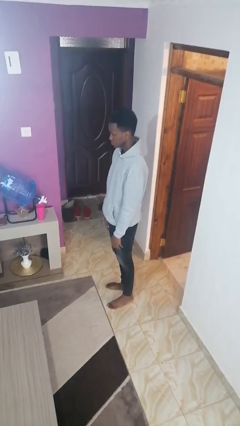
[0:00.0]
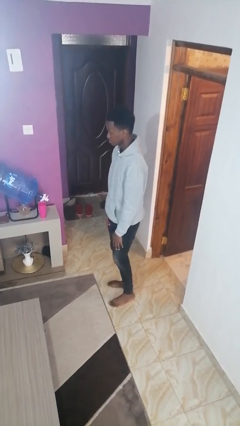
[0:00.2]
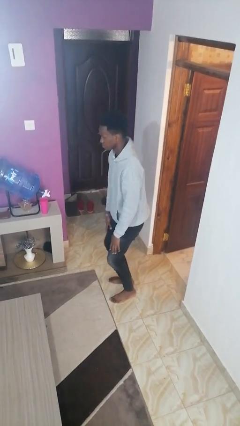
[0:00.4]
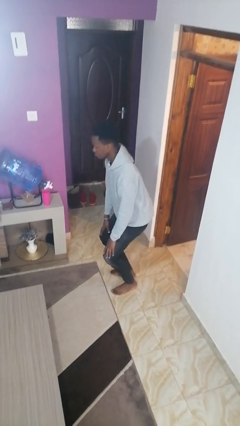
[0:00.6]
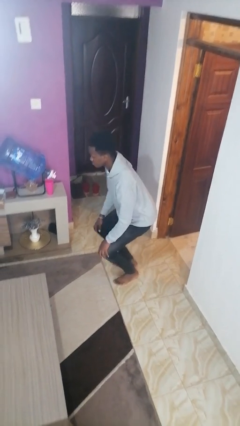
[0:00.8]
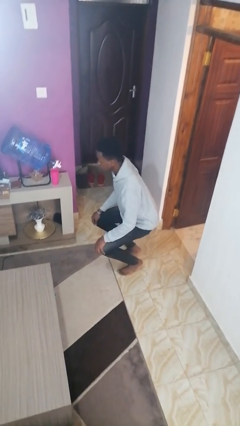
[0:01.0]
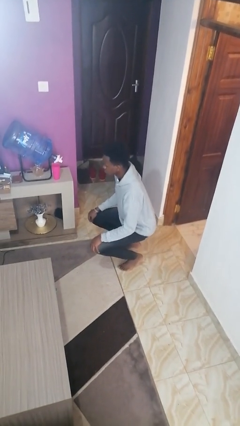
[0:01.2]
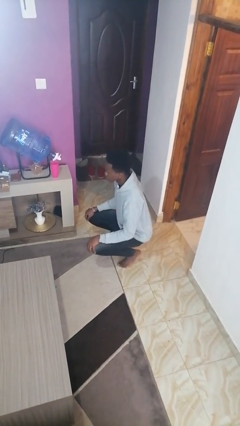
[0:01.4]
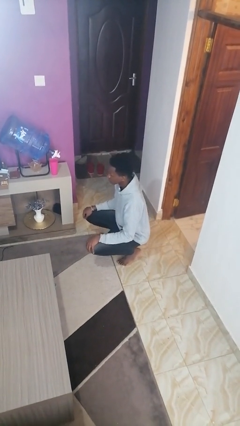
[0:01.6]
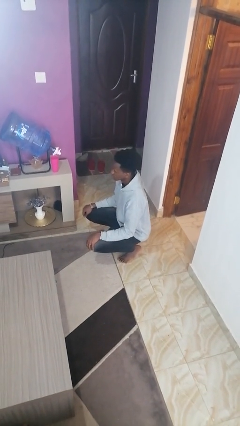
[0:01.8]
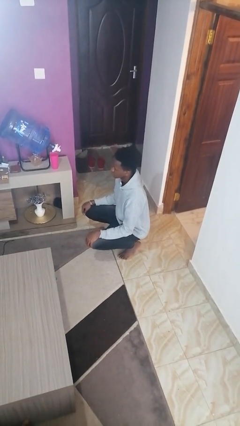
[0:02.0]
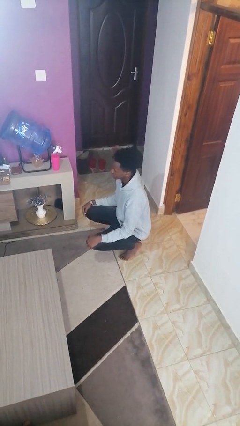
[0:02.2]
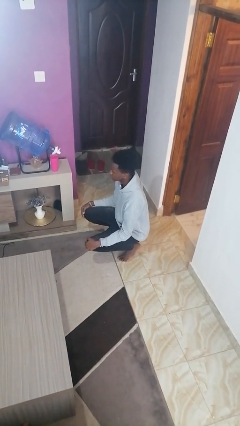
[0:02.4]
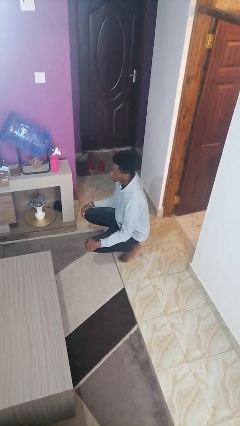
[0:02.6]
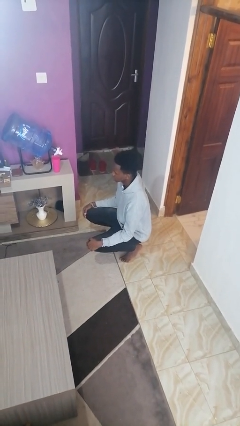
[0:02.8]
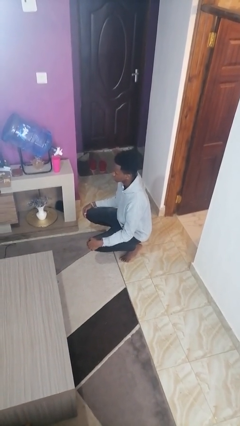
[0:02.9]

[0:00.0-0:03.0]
person squats

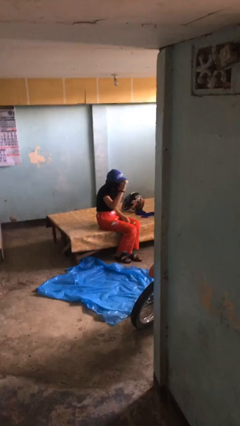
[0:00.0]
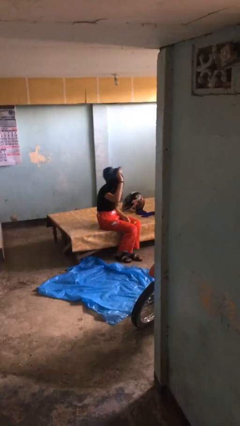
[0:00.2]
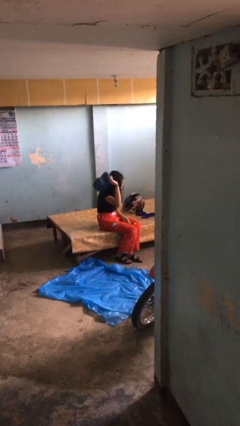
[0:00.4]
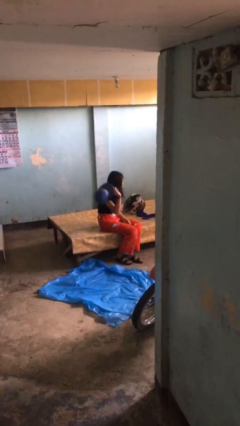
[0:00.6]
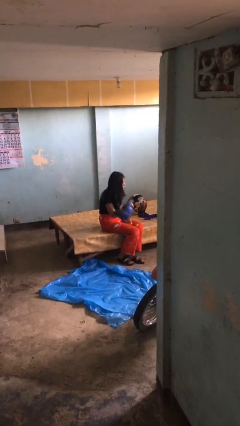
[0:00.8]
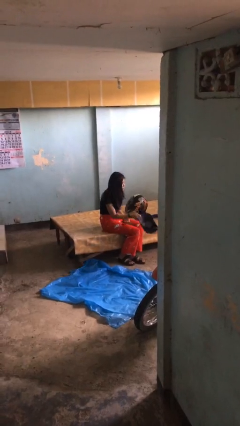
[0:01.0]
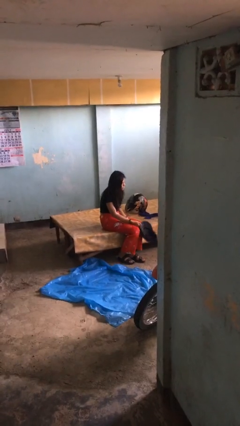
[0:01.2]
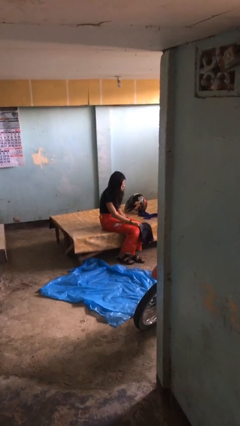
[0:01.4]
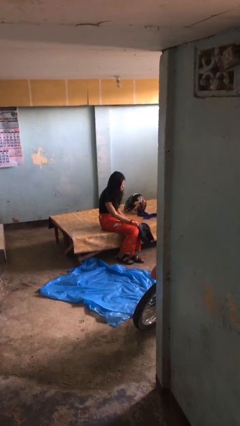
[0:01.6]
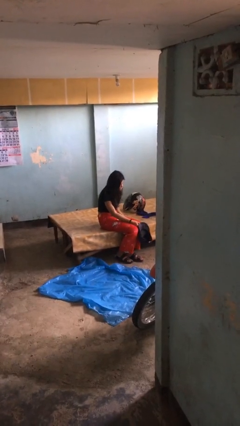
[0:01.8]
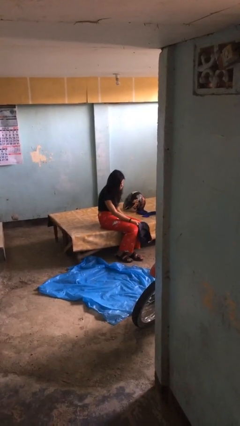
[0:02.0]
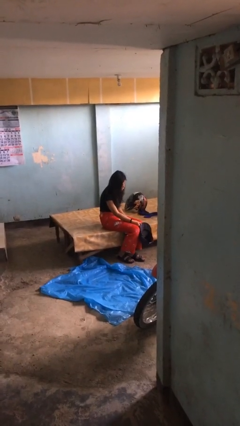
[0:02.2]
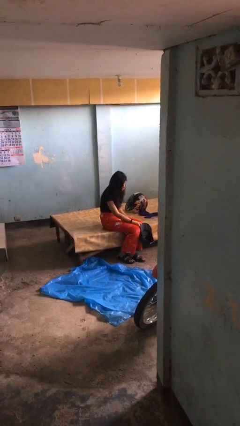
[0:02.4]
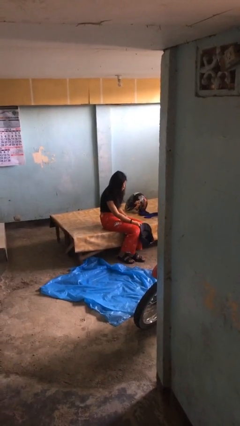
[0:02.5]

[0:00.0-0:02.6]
person takes off hat

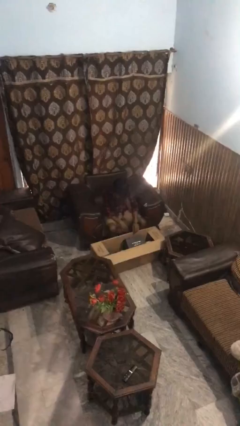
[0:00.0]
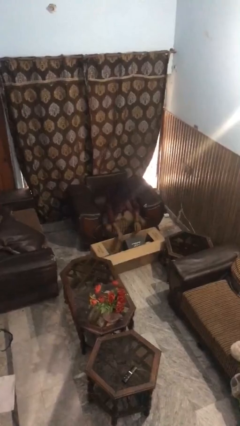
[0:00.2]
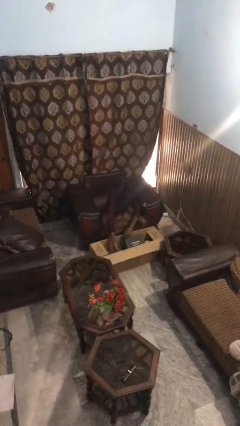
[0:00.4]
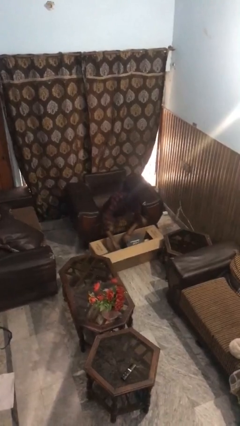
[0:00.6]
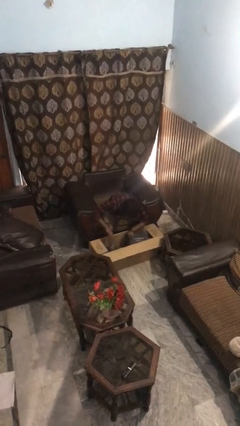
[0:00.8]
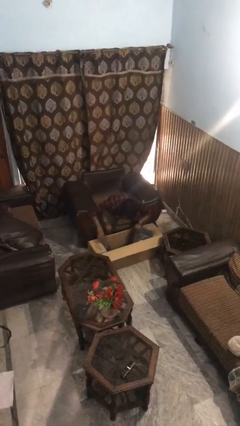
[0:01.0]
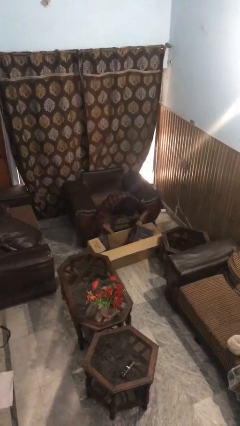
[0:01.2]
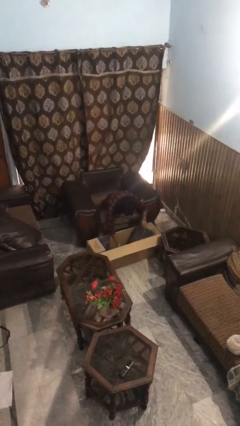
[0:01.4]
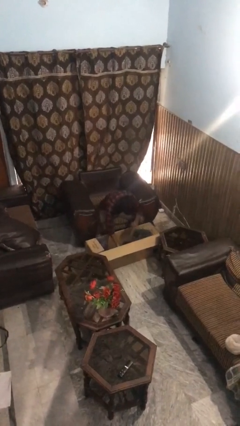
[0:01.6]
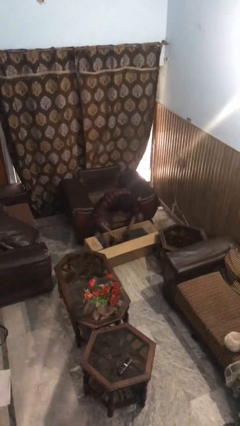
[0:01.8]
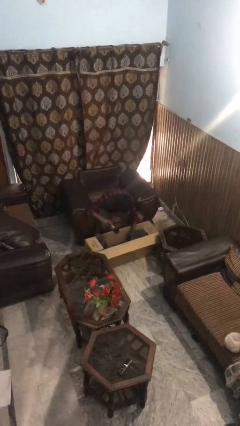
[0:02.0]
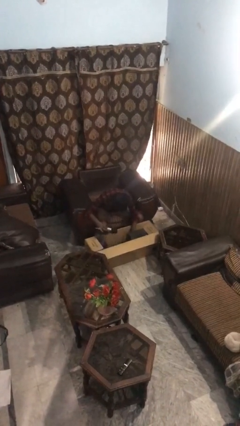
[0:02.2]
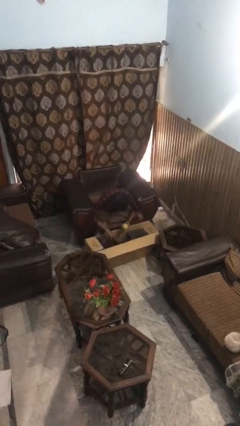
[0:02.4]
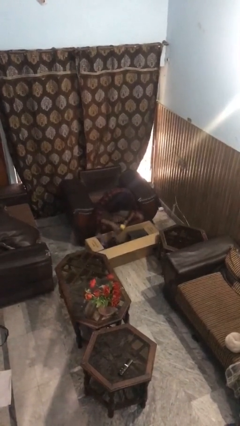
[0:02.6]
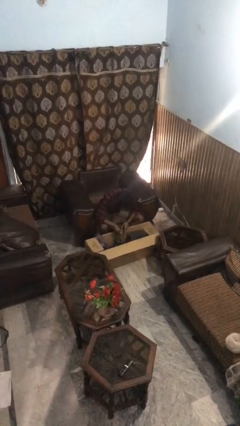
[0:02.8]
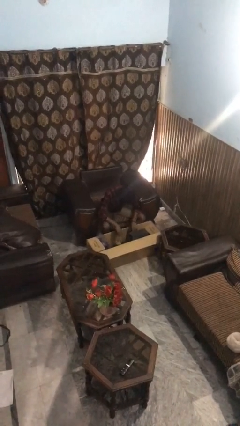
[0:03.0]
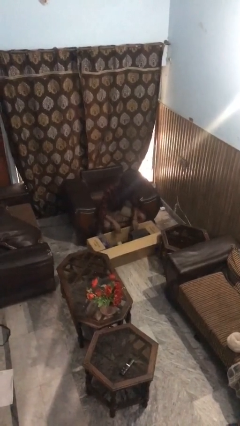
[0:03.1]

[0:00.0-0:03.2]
person searches in box

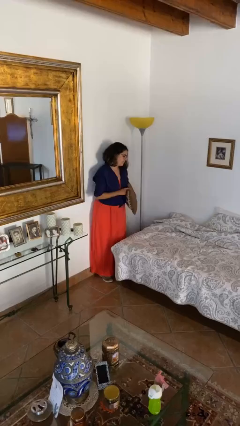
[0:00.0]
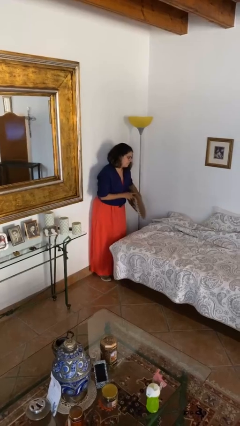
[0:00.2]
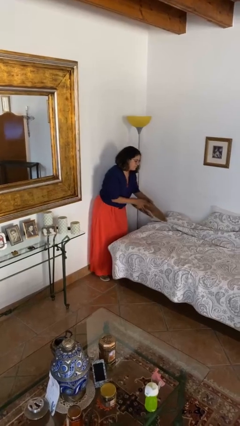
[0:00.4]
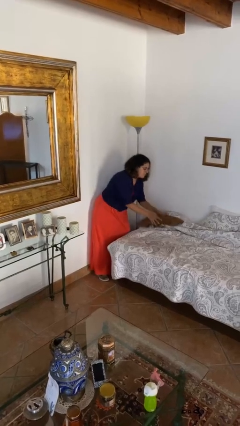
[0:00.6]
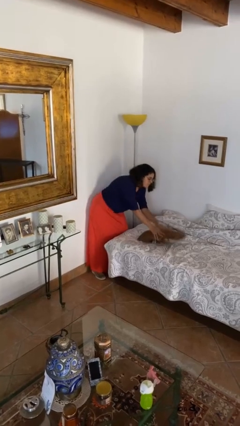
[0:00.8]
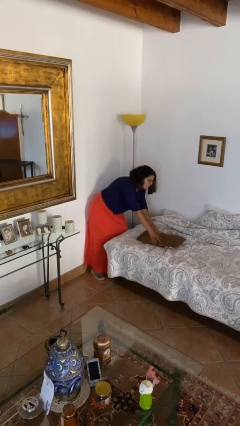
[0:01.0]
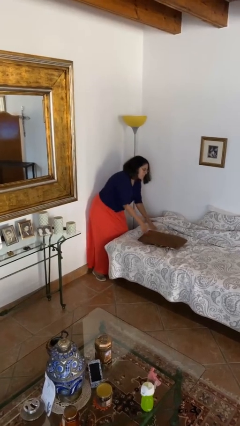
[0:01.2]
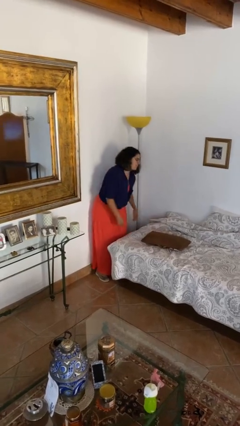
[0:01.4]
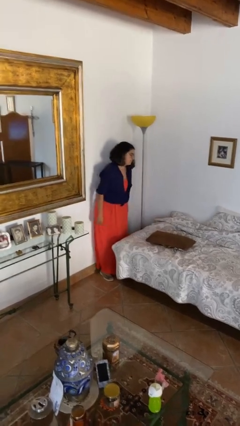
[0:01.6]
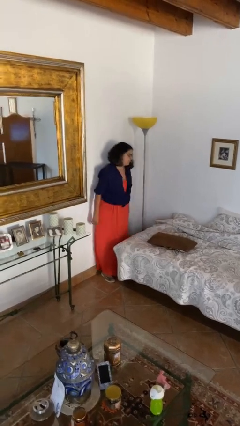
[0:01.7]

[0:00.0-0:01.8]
person puts down object on bed

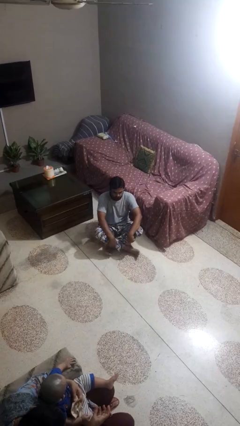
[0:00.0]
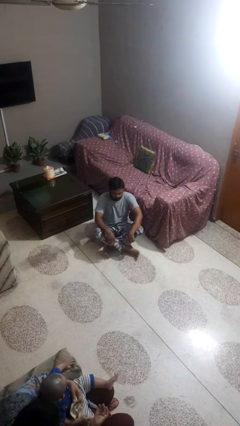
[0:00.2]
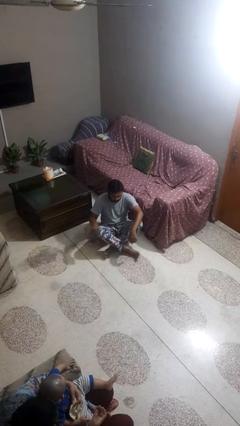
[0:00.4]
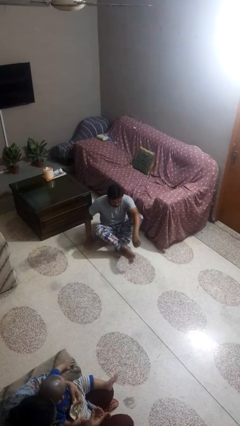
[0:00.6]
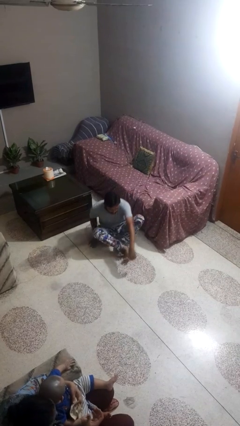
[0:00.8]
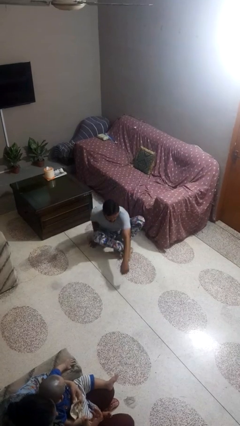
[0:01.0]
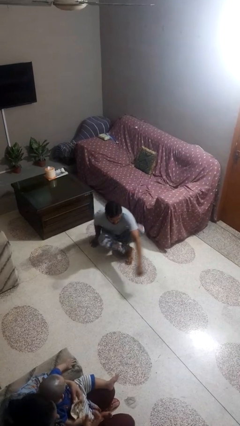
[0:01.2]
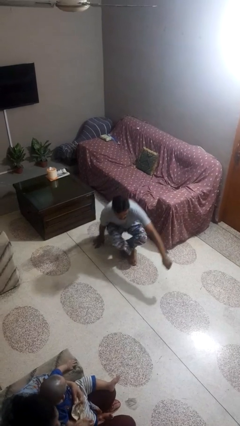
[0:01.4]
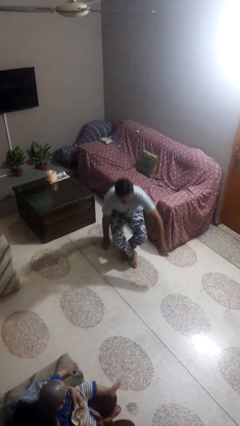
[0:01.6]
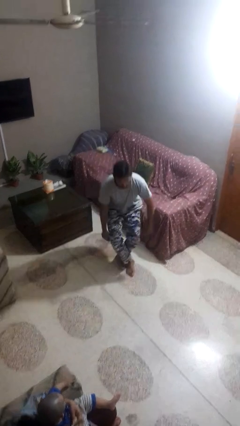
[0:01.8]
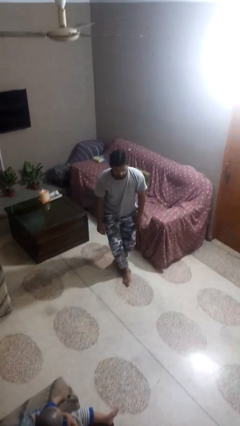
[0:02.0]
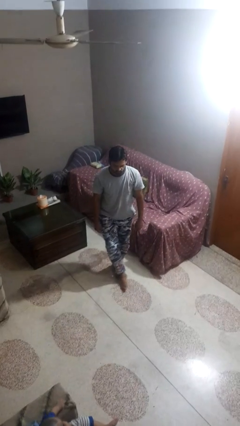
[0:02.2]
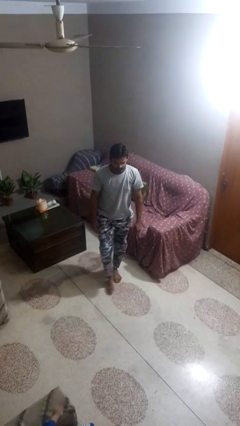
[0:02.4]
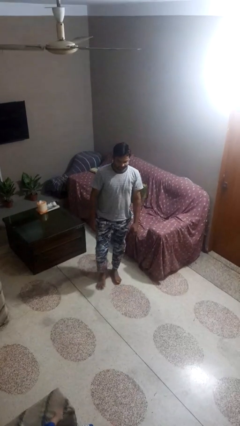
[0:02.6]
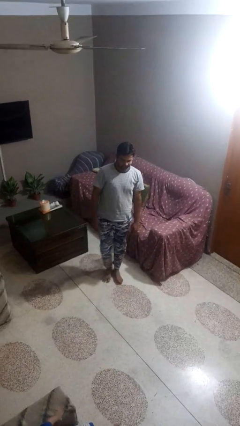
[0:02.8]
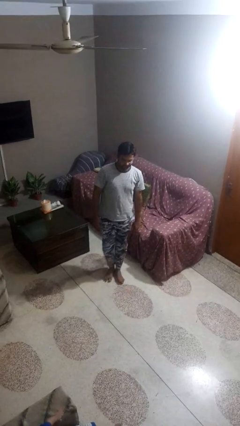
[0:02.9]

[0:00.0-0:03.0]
person stands up from floor

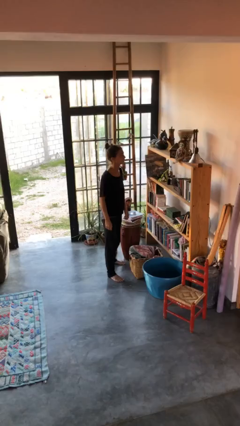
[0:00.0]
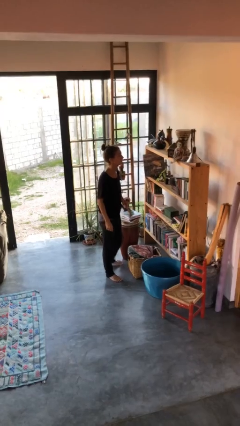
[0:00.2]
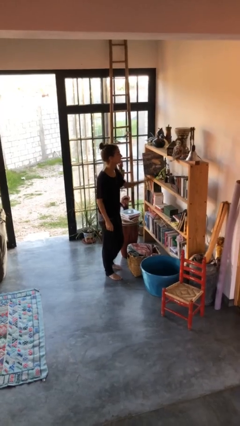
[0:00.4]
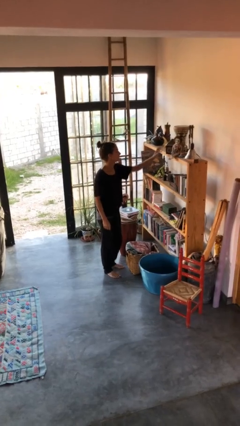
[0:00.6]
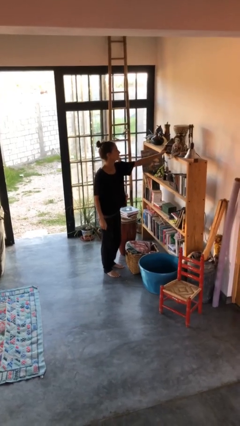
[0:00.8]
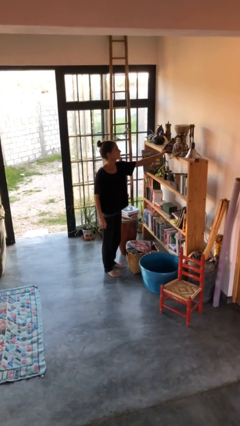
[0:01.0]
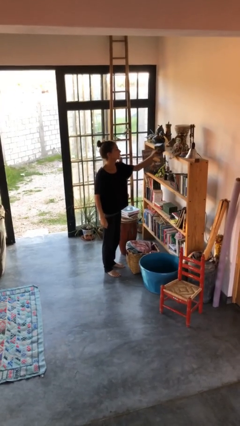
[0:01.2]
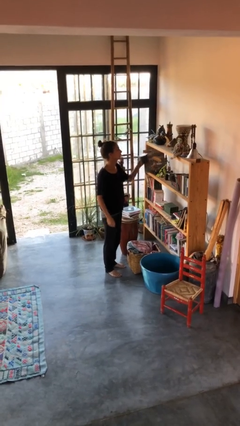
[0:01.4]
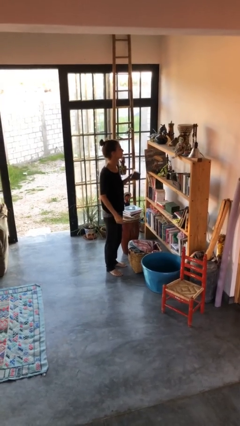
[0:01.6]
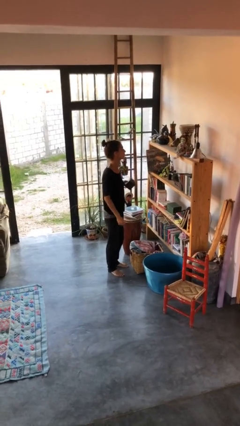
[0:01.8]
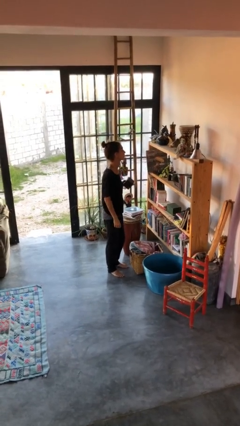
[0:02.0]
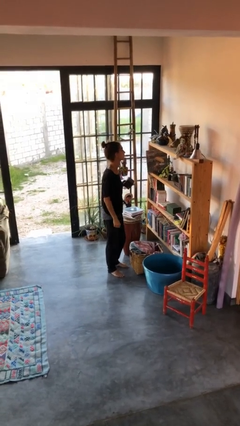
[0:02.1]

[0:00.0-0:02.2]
person picks up object from countertop

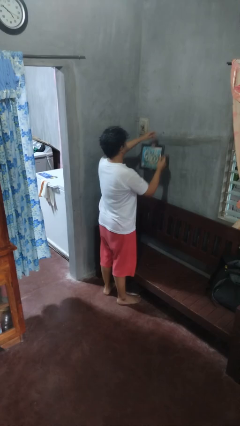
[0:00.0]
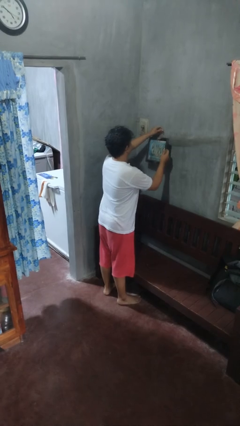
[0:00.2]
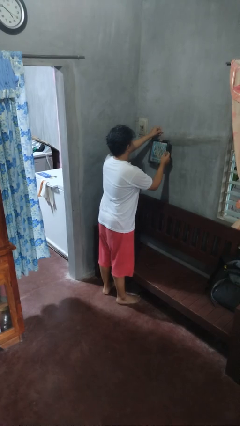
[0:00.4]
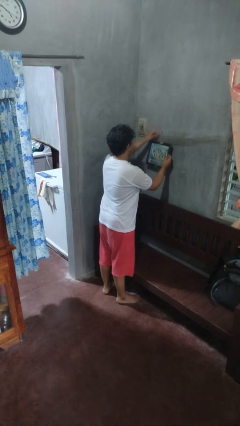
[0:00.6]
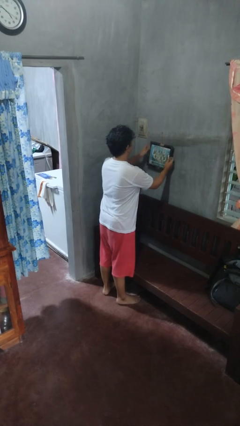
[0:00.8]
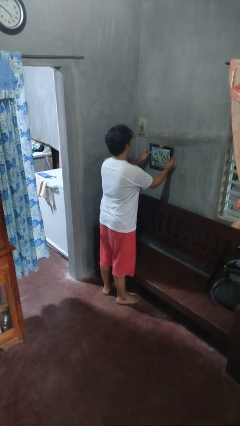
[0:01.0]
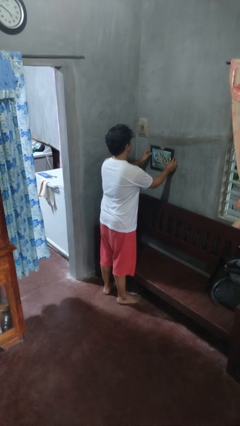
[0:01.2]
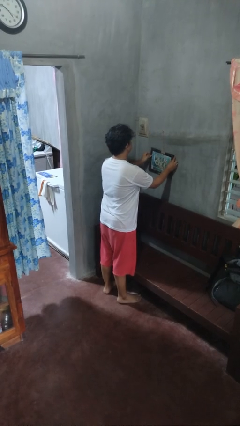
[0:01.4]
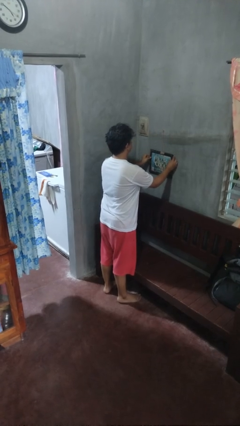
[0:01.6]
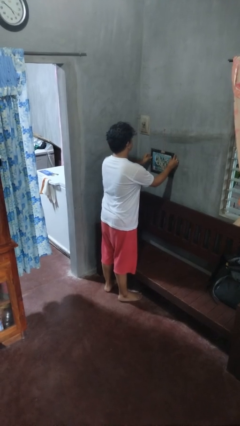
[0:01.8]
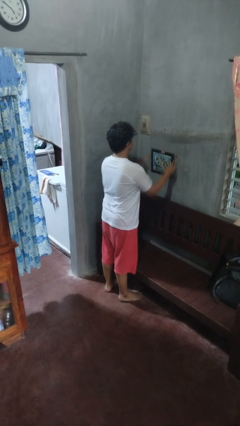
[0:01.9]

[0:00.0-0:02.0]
person puts up picture frame
